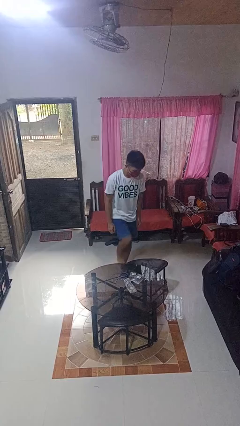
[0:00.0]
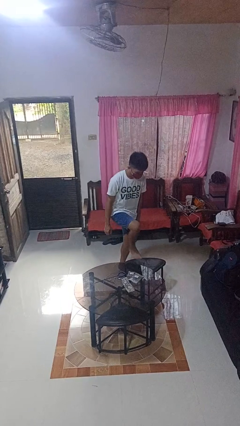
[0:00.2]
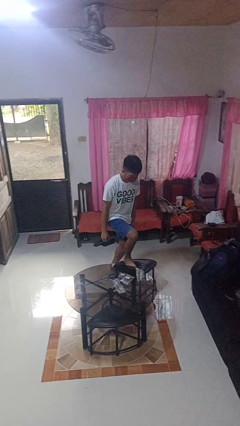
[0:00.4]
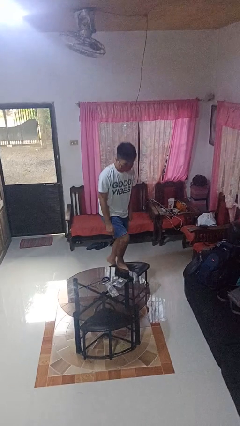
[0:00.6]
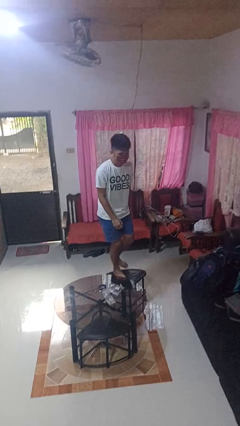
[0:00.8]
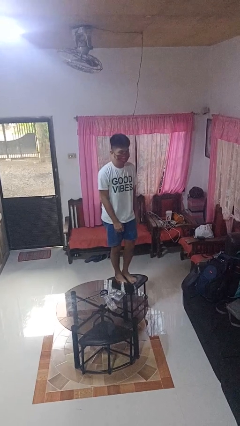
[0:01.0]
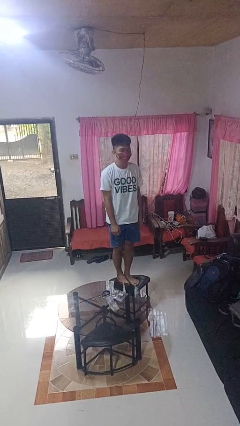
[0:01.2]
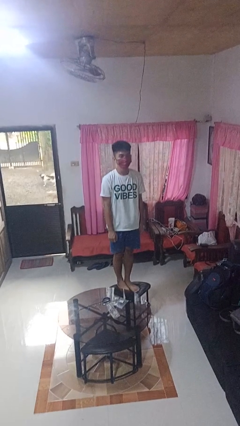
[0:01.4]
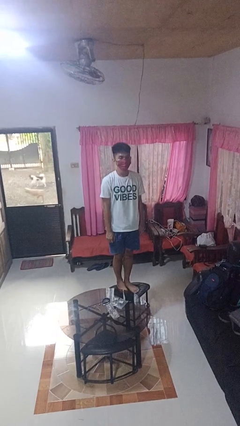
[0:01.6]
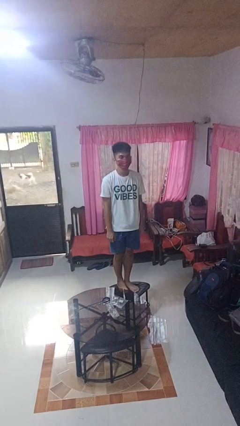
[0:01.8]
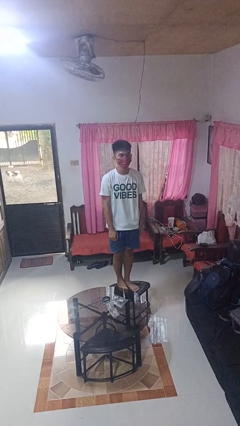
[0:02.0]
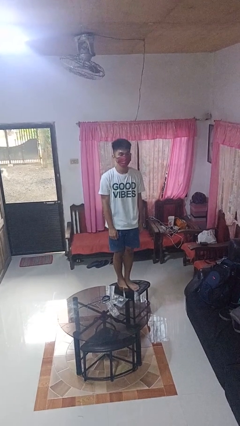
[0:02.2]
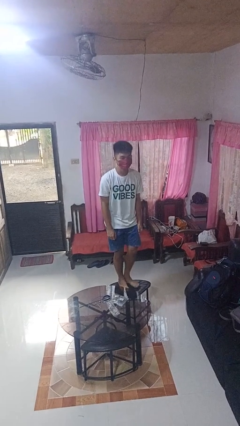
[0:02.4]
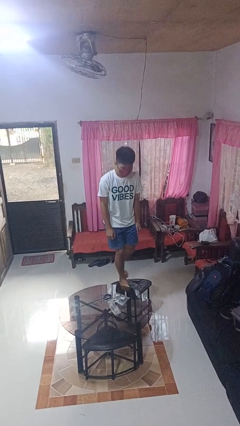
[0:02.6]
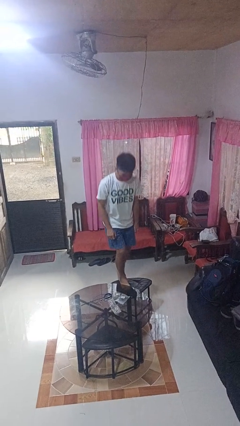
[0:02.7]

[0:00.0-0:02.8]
person climbs on chair

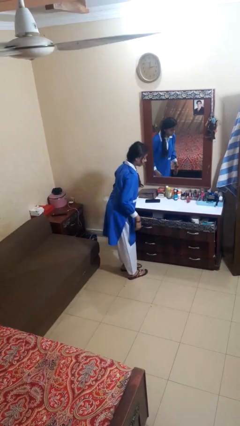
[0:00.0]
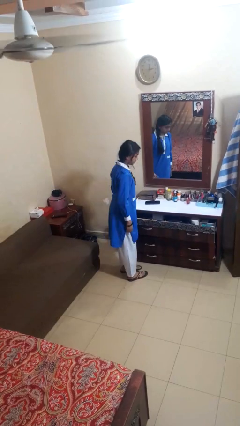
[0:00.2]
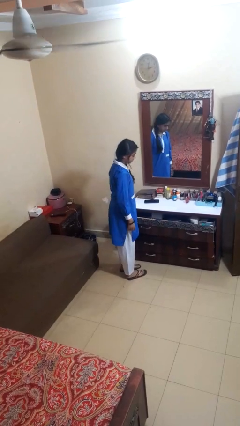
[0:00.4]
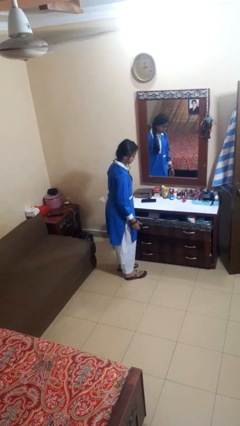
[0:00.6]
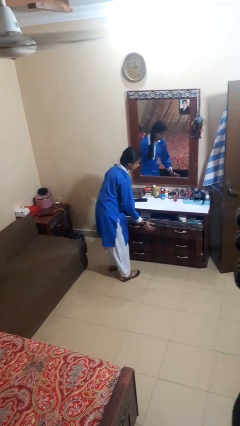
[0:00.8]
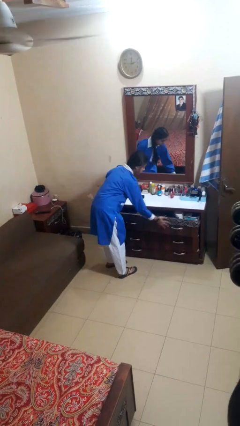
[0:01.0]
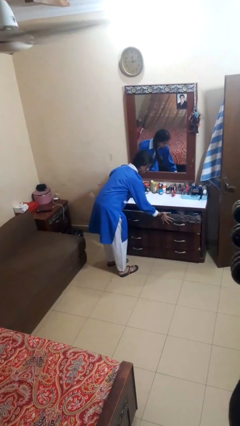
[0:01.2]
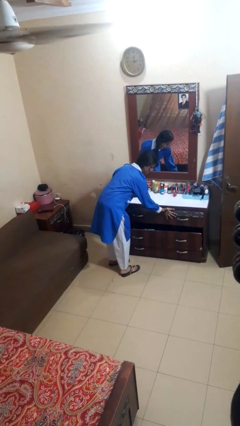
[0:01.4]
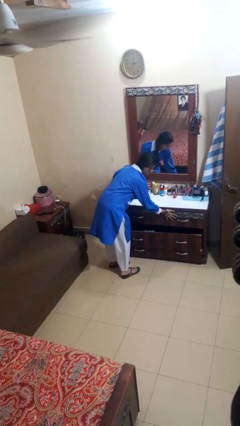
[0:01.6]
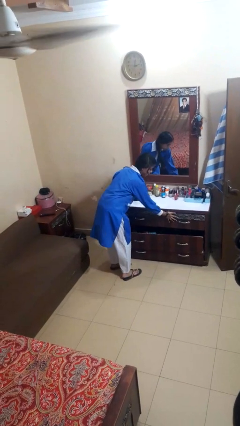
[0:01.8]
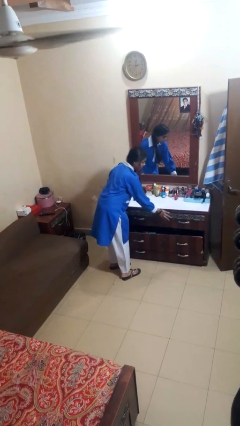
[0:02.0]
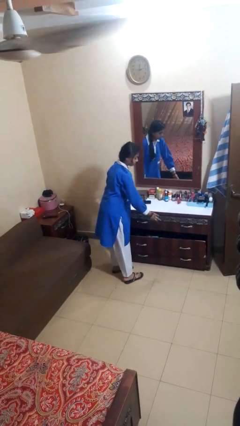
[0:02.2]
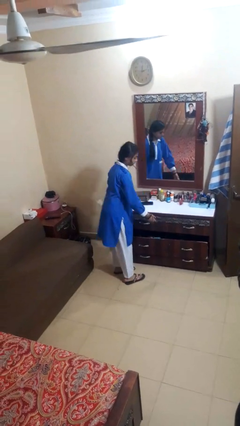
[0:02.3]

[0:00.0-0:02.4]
person closes dresser drawer

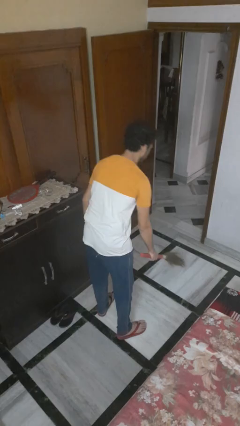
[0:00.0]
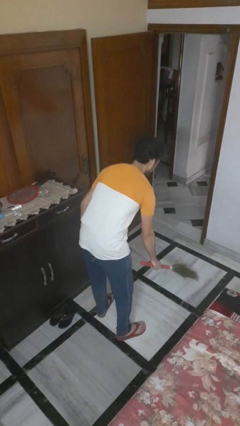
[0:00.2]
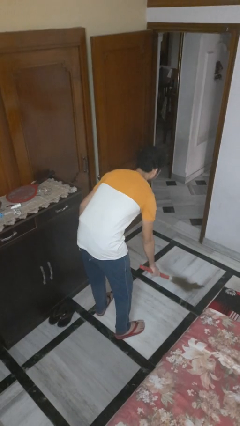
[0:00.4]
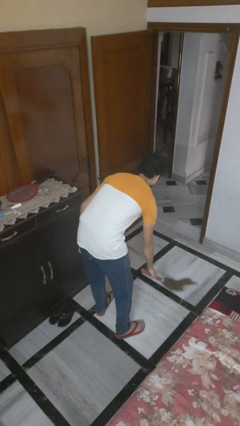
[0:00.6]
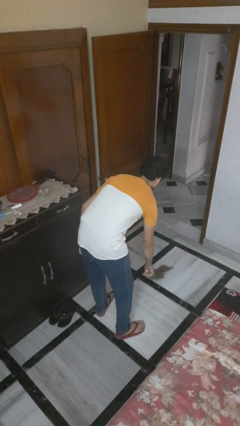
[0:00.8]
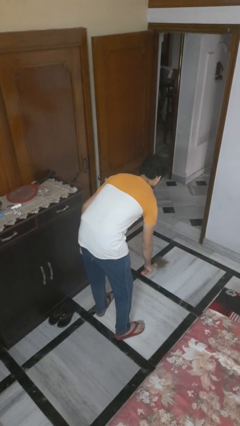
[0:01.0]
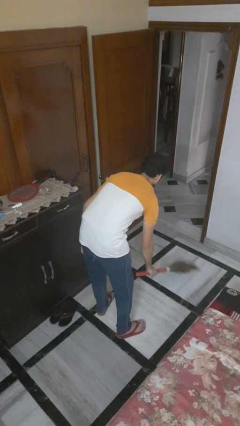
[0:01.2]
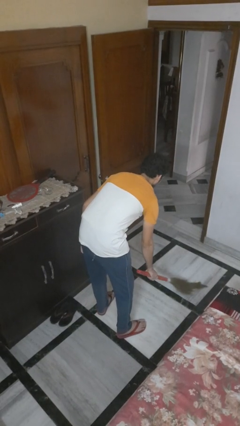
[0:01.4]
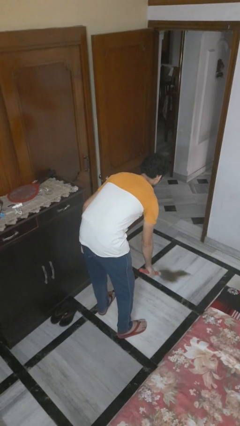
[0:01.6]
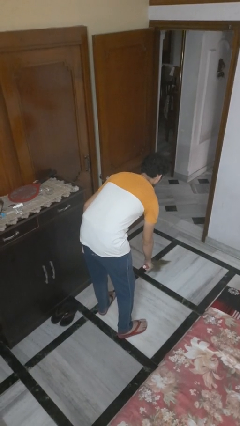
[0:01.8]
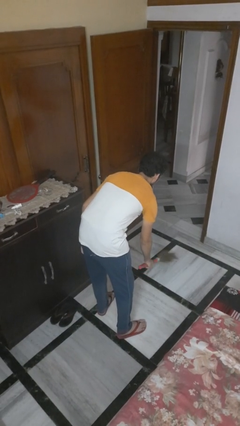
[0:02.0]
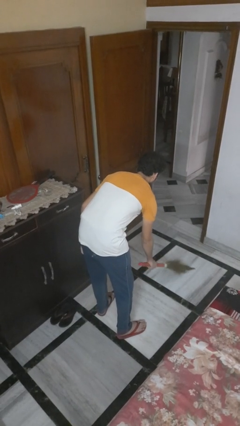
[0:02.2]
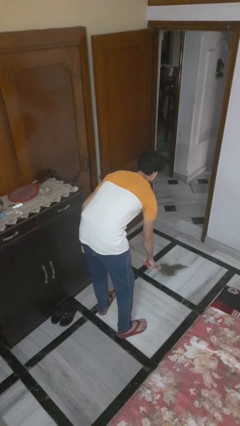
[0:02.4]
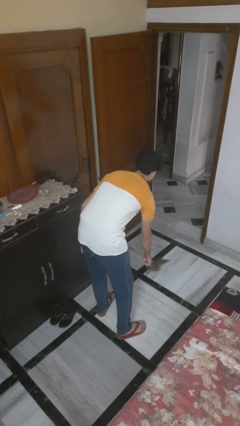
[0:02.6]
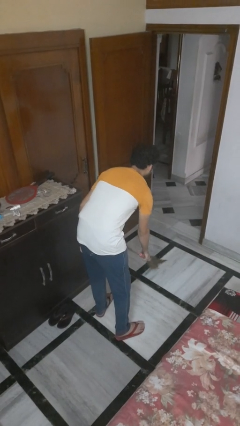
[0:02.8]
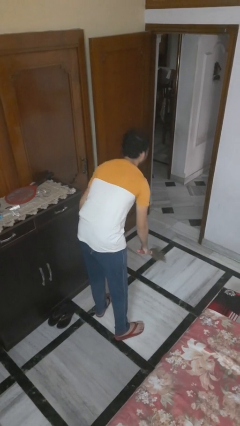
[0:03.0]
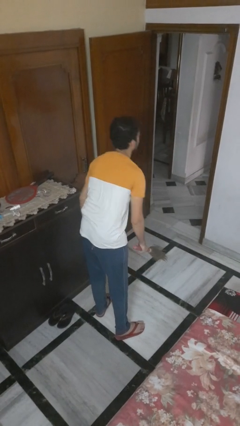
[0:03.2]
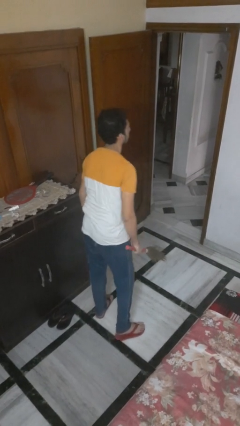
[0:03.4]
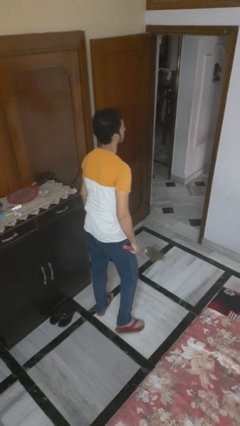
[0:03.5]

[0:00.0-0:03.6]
person sweeps floor

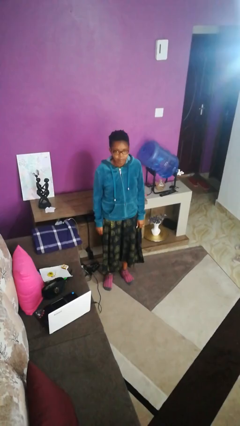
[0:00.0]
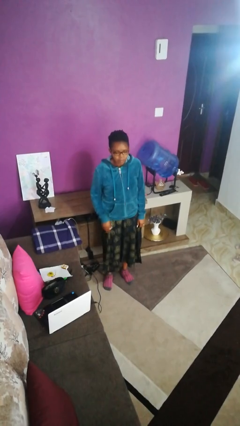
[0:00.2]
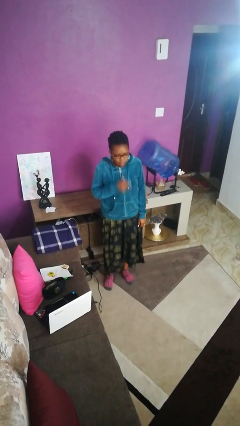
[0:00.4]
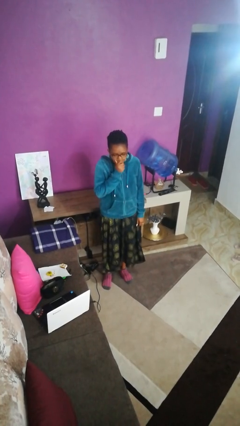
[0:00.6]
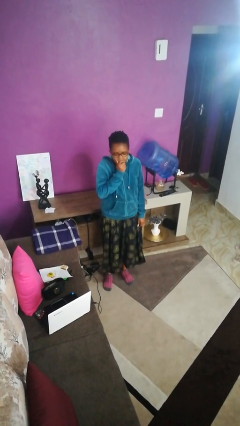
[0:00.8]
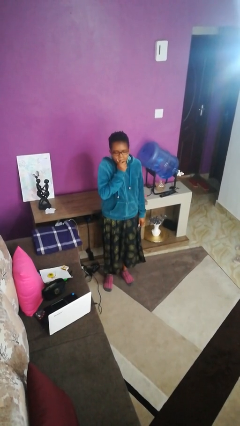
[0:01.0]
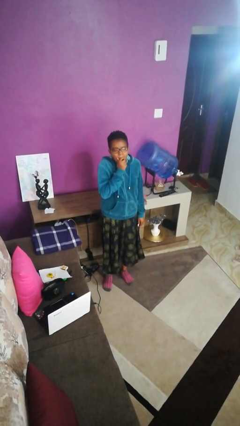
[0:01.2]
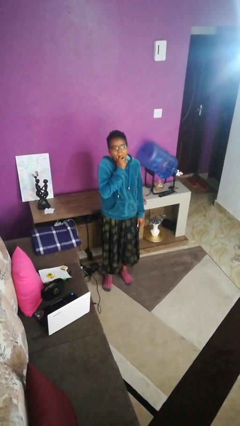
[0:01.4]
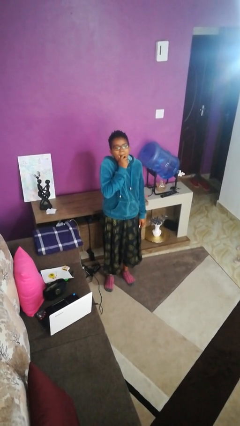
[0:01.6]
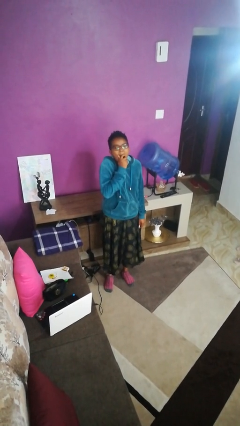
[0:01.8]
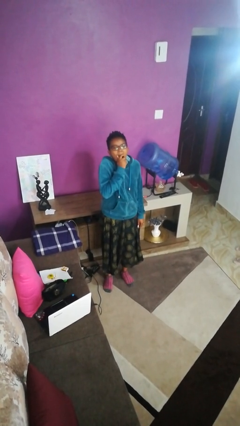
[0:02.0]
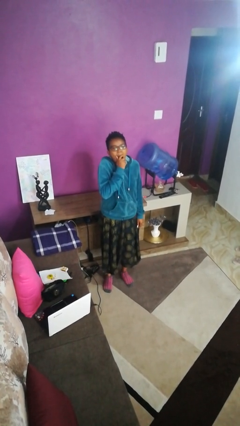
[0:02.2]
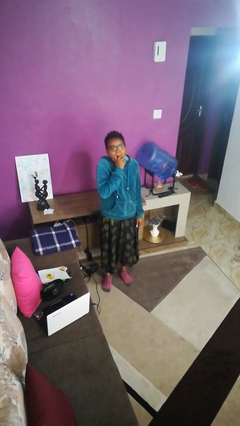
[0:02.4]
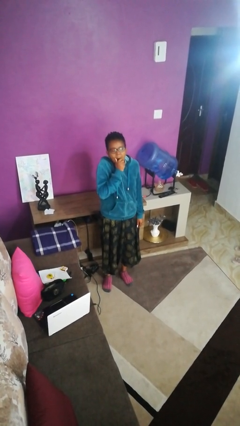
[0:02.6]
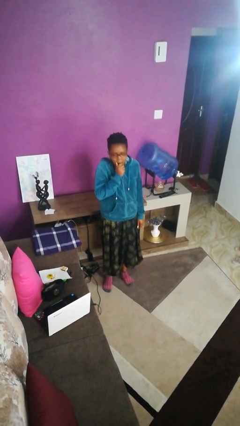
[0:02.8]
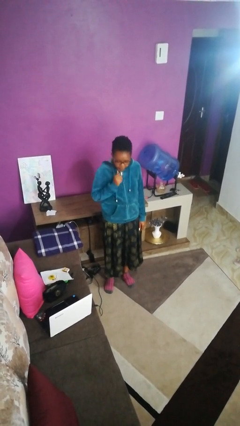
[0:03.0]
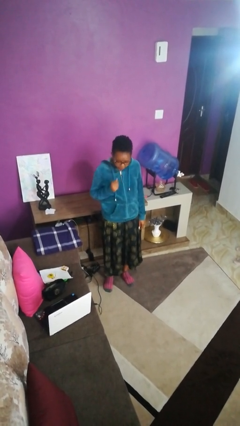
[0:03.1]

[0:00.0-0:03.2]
person yawns

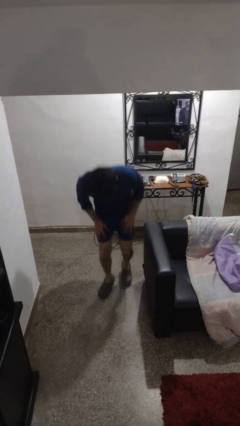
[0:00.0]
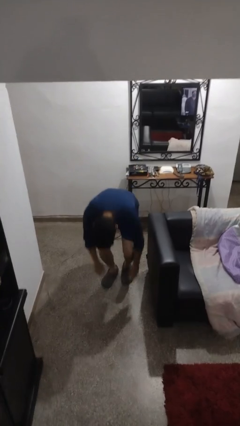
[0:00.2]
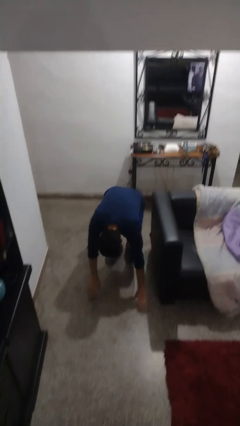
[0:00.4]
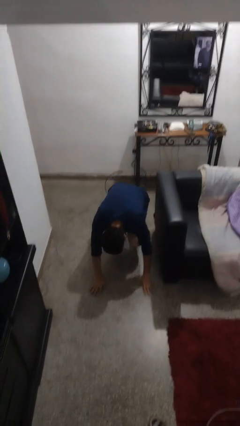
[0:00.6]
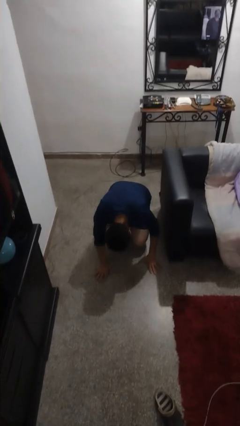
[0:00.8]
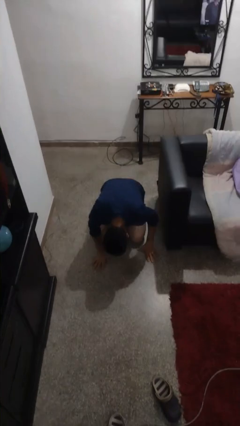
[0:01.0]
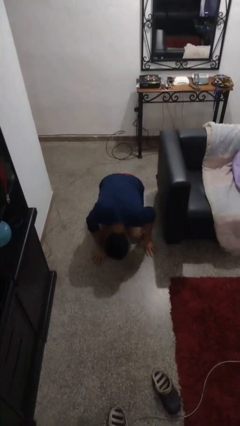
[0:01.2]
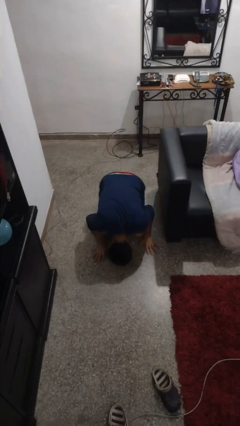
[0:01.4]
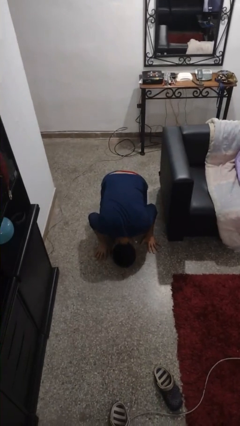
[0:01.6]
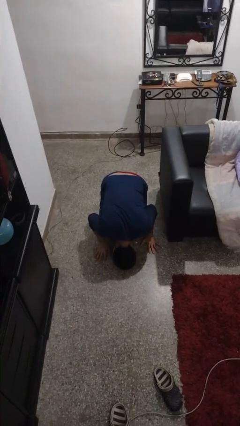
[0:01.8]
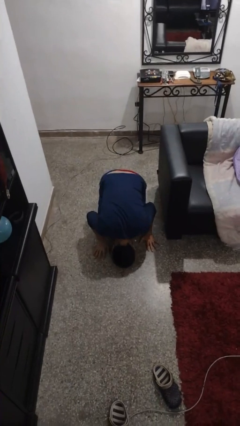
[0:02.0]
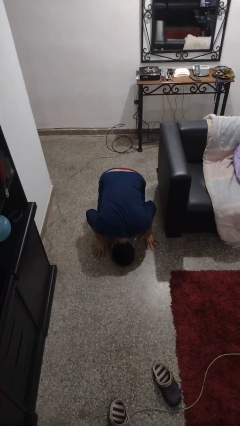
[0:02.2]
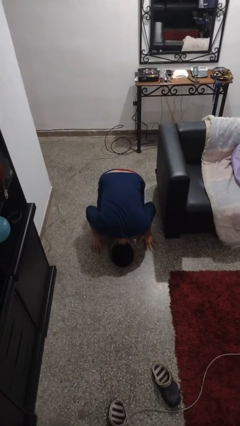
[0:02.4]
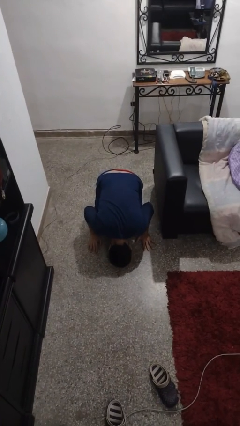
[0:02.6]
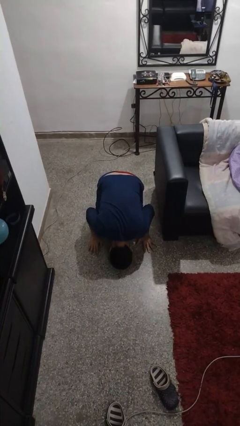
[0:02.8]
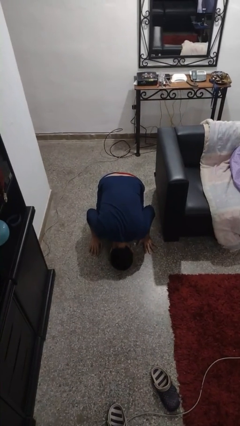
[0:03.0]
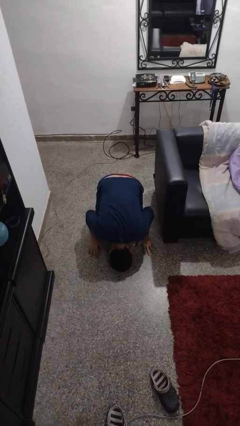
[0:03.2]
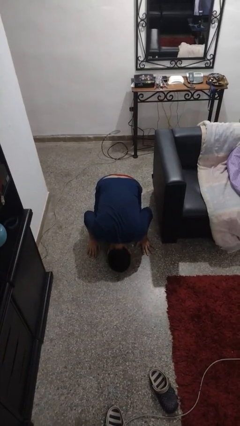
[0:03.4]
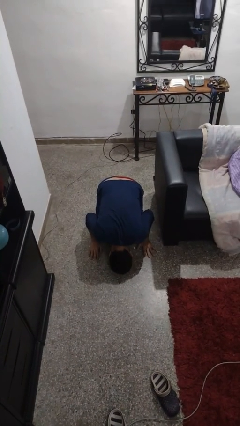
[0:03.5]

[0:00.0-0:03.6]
person lies down on floor

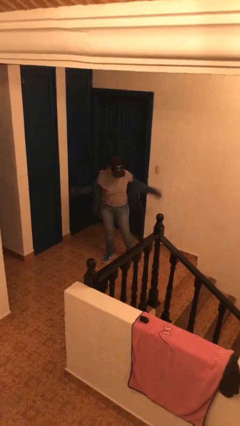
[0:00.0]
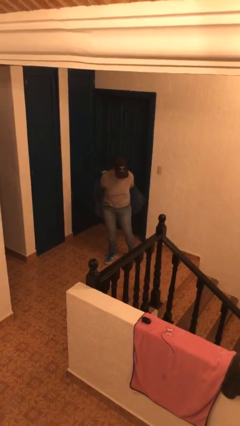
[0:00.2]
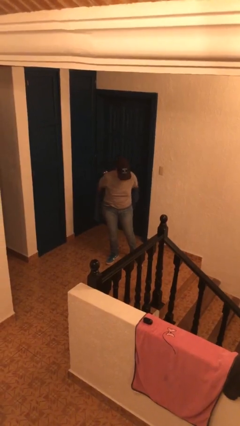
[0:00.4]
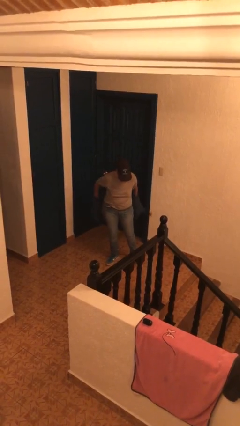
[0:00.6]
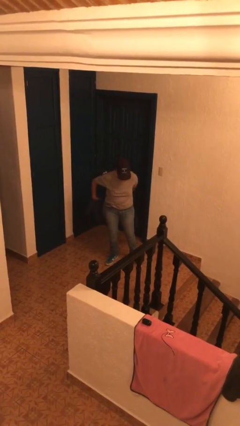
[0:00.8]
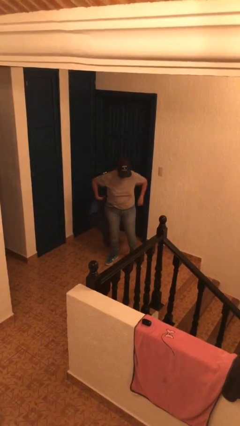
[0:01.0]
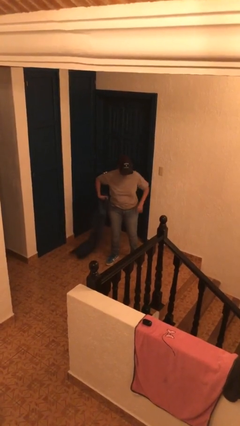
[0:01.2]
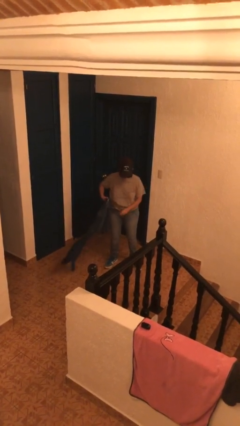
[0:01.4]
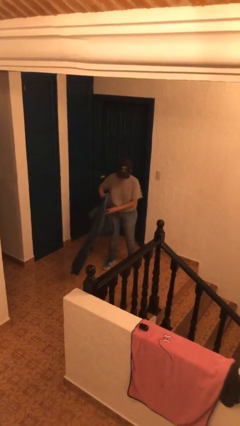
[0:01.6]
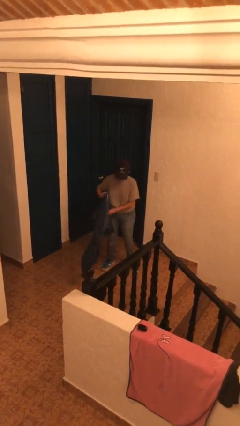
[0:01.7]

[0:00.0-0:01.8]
person takes off jacket

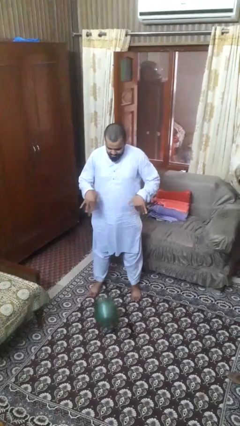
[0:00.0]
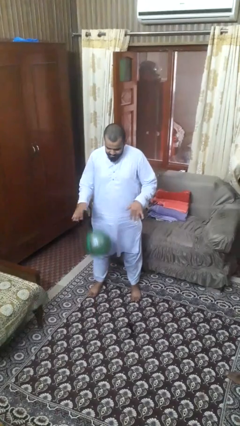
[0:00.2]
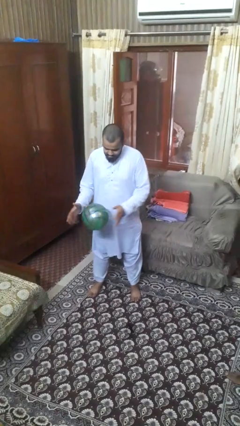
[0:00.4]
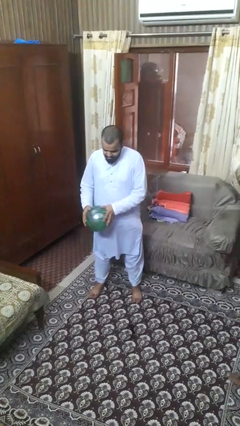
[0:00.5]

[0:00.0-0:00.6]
person bounces ball on floor
